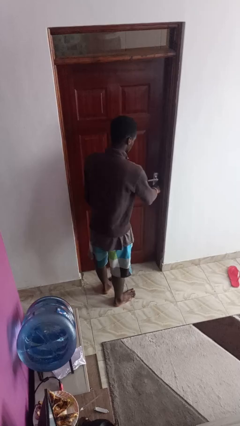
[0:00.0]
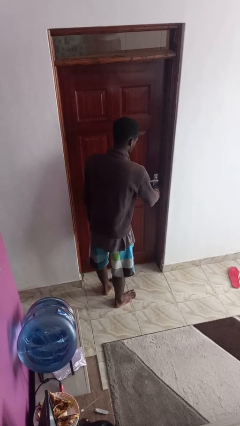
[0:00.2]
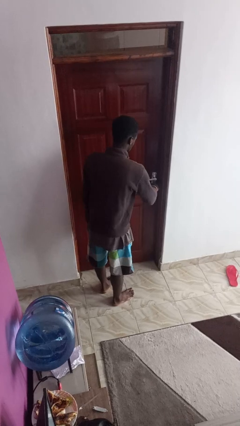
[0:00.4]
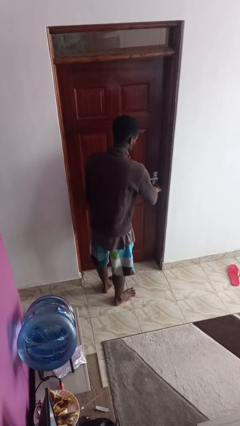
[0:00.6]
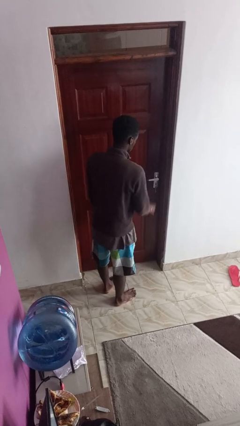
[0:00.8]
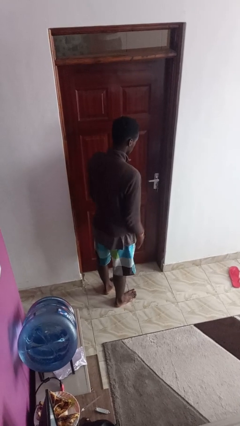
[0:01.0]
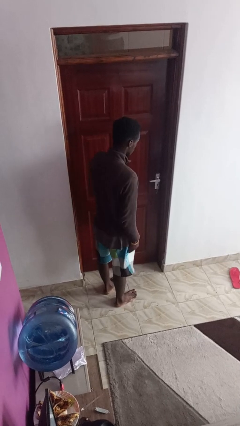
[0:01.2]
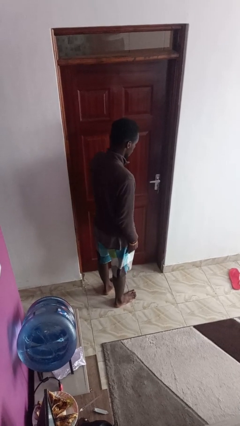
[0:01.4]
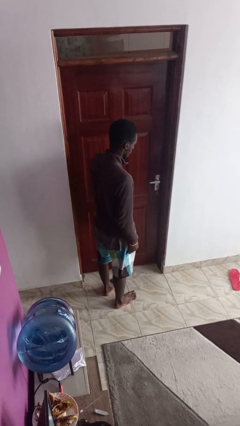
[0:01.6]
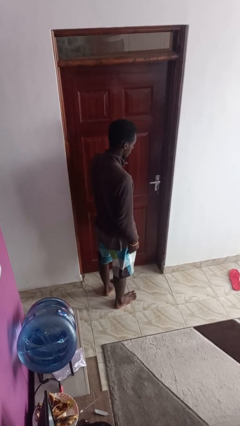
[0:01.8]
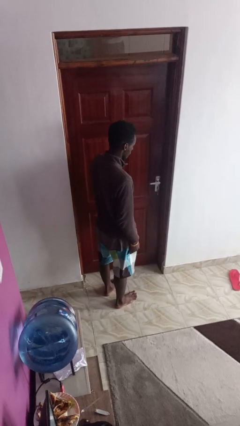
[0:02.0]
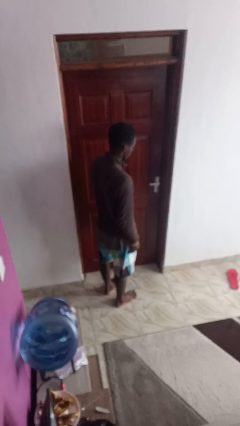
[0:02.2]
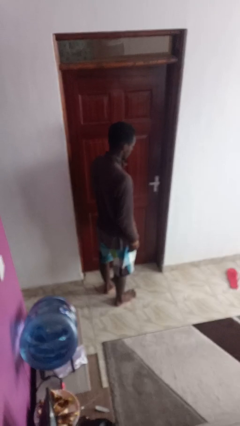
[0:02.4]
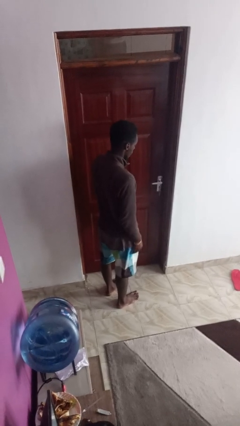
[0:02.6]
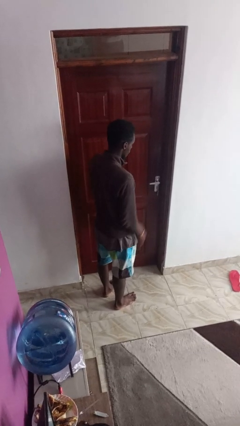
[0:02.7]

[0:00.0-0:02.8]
person unlocks door with keys

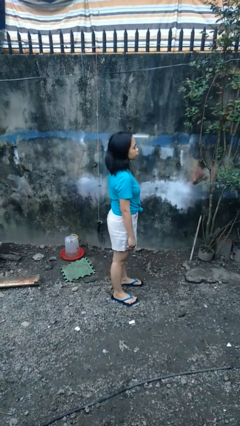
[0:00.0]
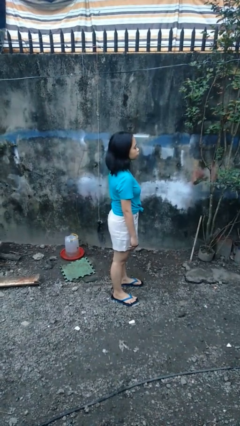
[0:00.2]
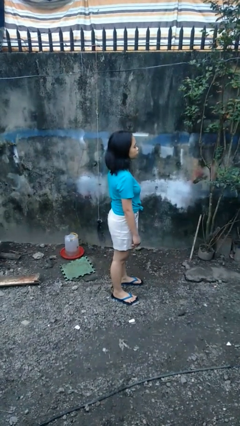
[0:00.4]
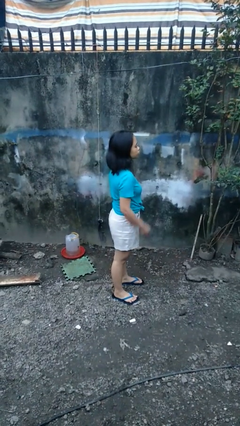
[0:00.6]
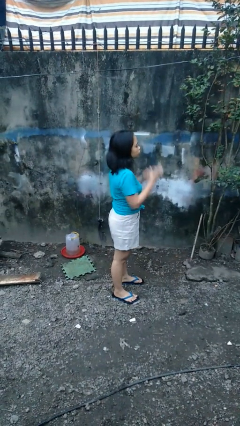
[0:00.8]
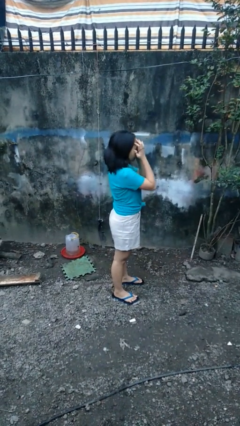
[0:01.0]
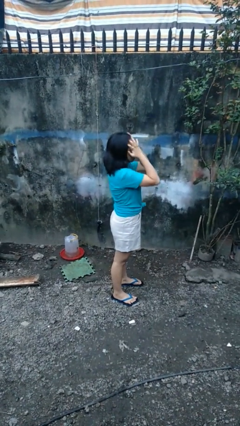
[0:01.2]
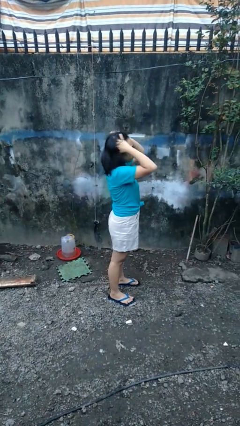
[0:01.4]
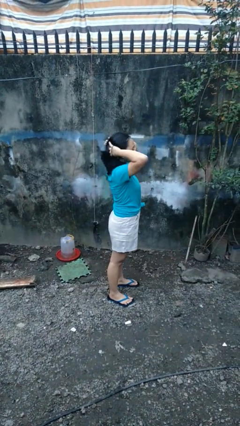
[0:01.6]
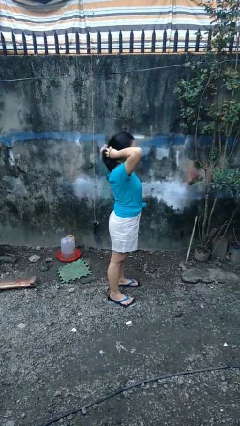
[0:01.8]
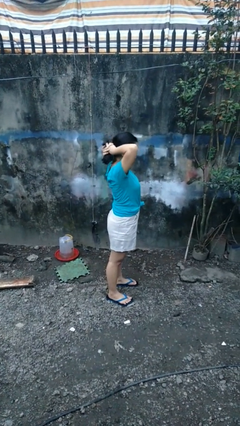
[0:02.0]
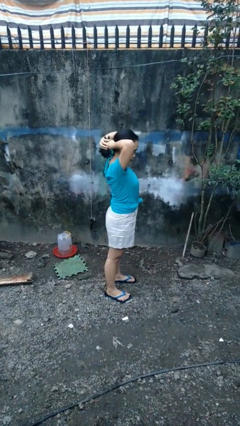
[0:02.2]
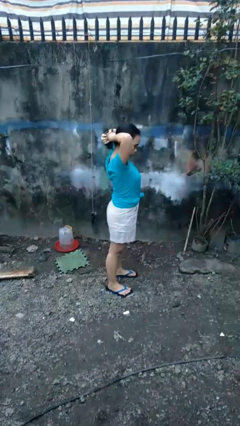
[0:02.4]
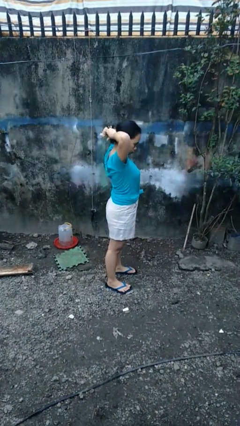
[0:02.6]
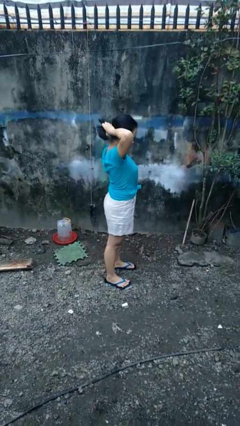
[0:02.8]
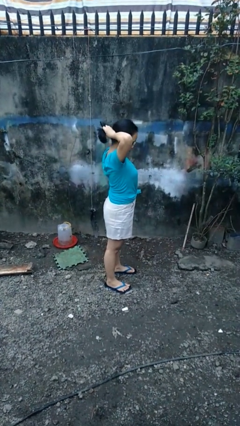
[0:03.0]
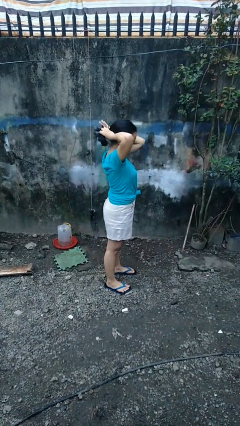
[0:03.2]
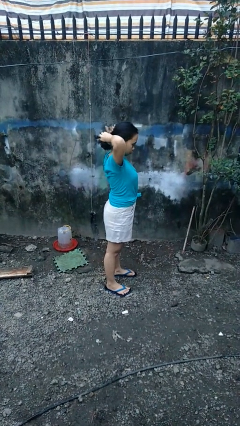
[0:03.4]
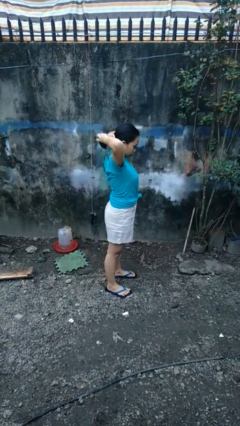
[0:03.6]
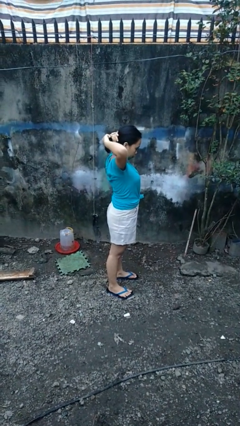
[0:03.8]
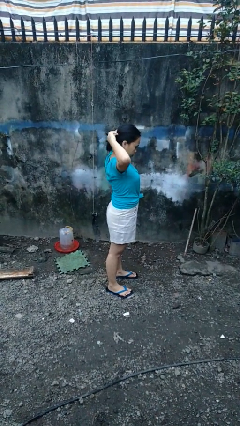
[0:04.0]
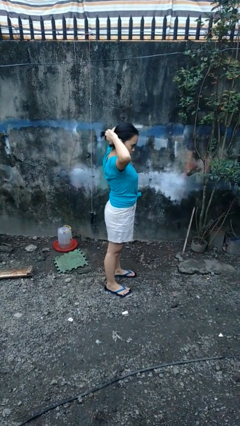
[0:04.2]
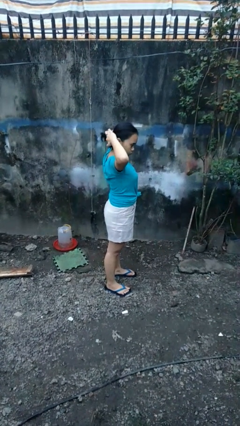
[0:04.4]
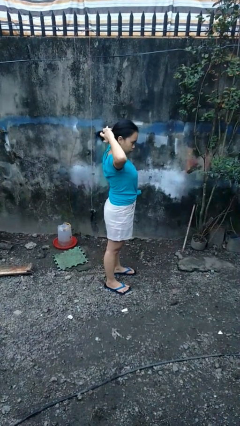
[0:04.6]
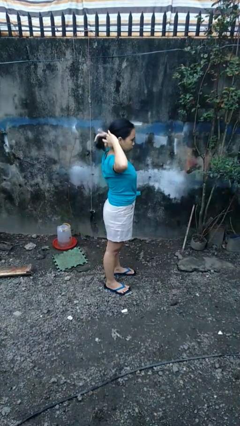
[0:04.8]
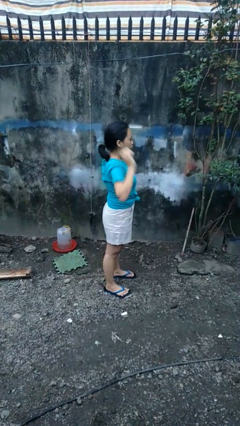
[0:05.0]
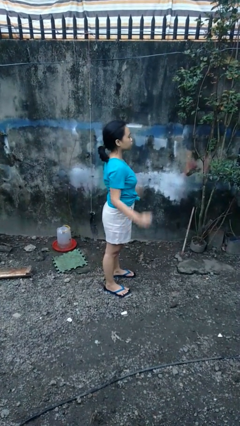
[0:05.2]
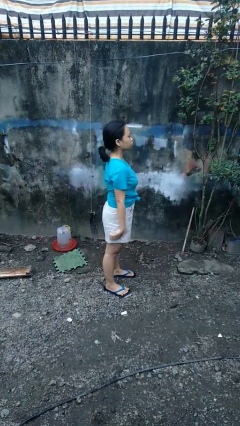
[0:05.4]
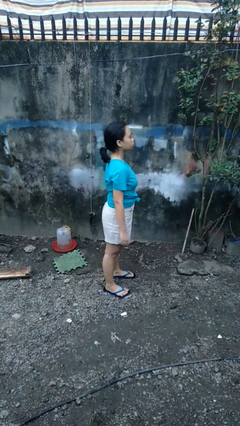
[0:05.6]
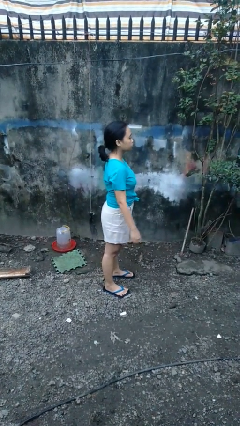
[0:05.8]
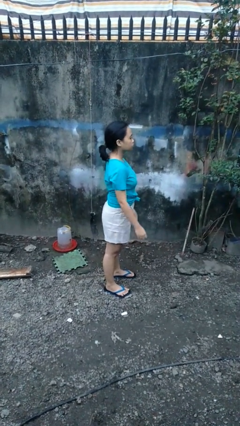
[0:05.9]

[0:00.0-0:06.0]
person puts hair in ponytail

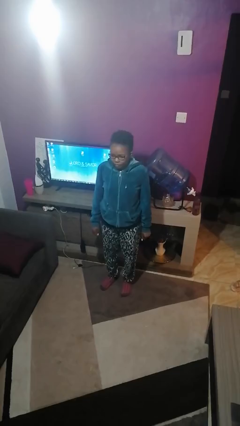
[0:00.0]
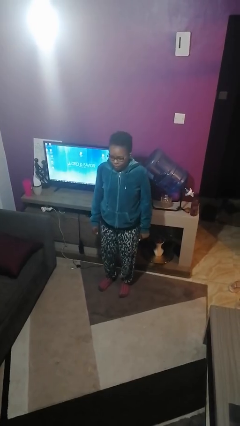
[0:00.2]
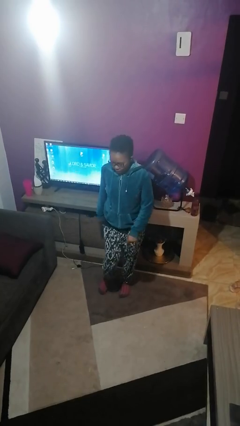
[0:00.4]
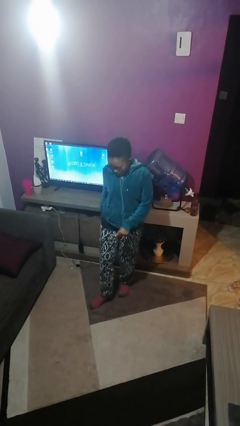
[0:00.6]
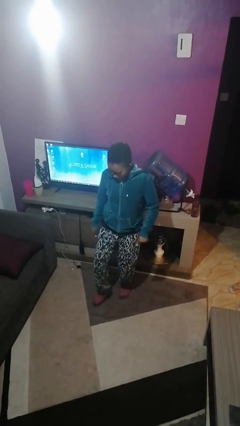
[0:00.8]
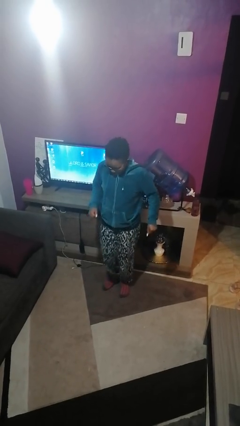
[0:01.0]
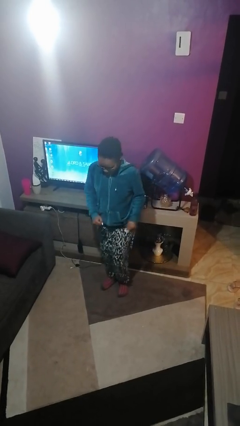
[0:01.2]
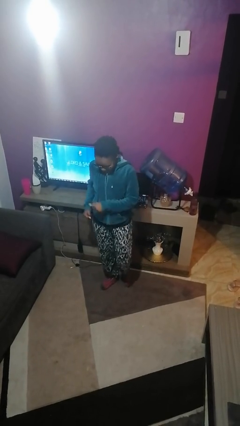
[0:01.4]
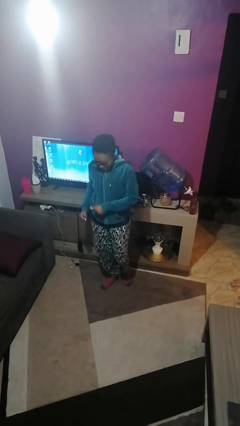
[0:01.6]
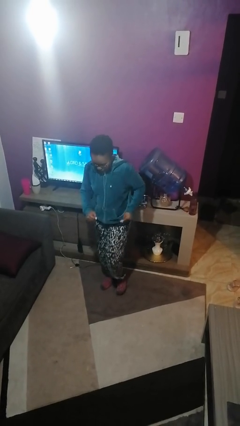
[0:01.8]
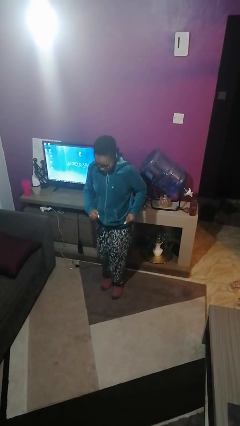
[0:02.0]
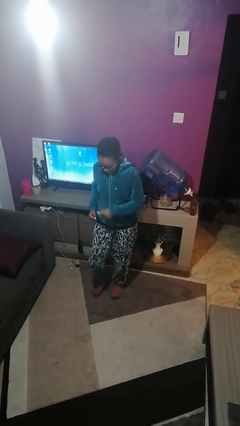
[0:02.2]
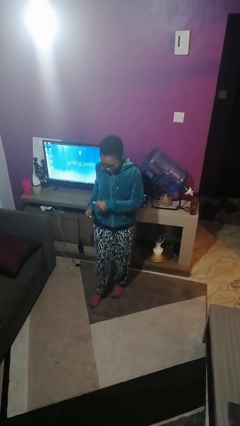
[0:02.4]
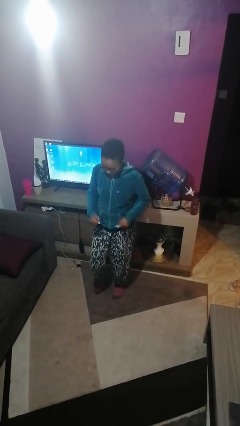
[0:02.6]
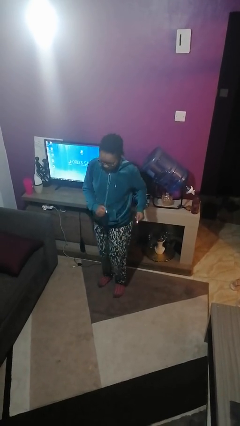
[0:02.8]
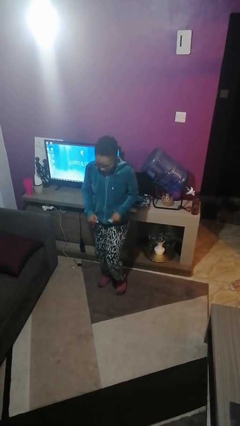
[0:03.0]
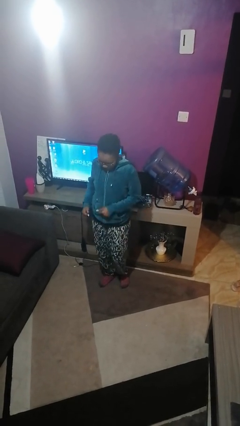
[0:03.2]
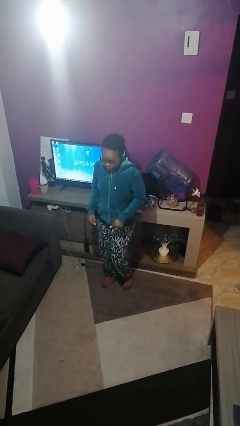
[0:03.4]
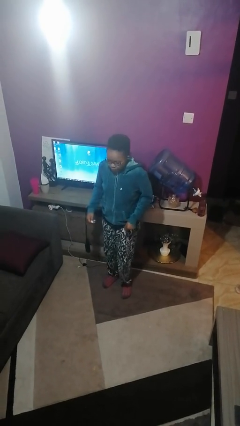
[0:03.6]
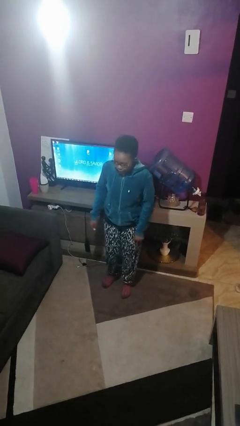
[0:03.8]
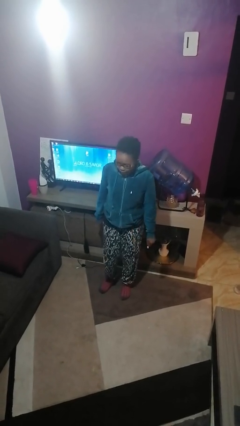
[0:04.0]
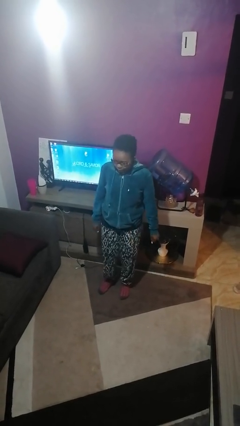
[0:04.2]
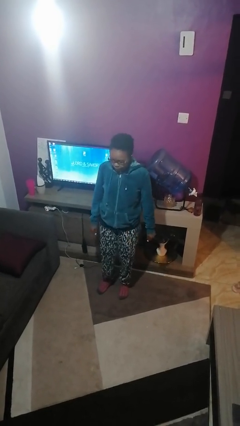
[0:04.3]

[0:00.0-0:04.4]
person dances in place

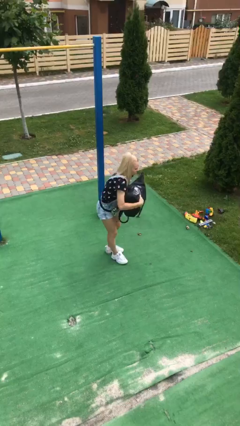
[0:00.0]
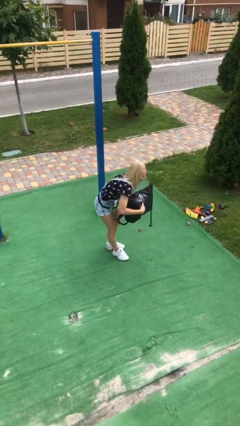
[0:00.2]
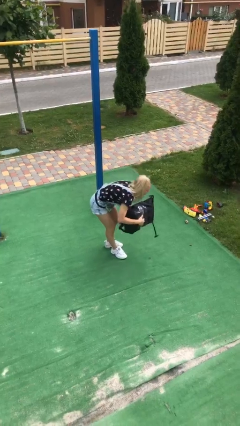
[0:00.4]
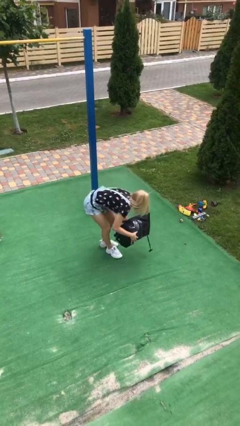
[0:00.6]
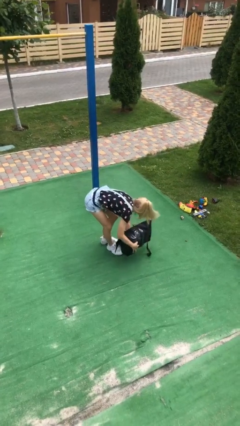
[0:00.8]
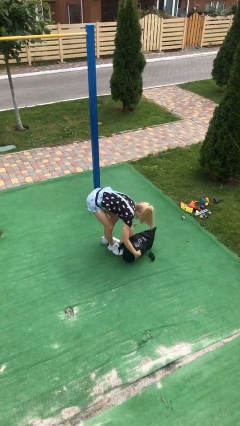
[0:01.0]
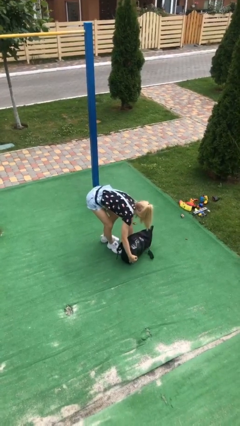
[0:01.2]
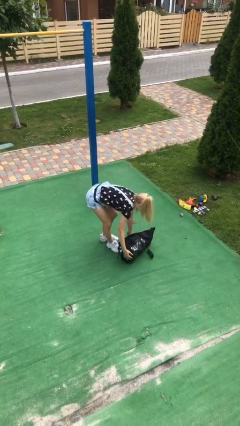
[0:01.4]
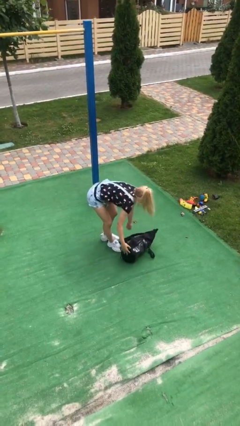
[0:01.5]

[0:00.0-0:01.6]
person puts down object on floor

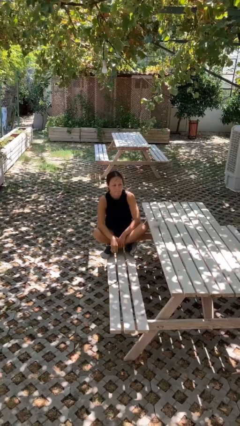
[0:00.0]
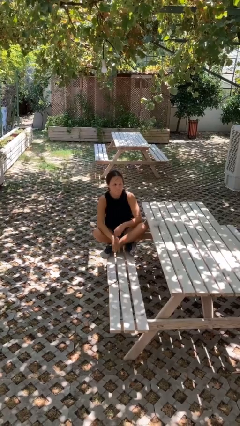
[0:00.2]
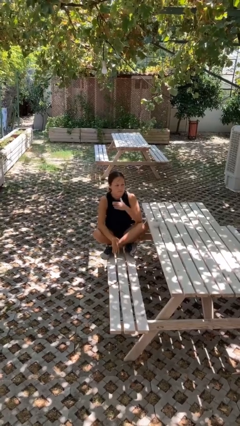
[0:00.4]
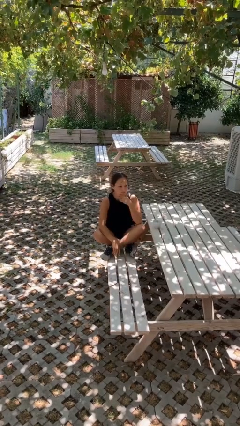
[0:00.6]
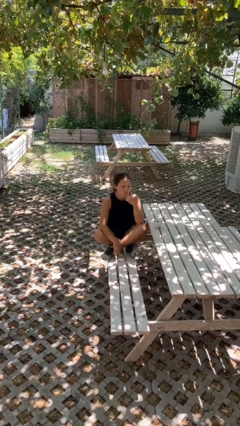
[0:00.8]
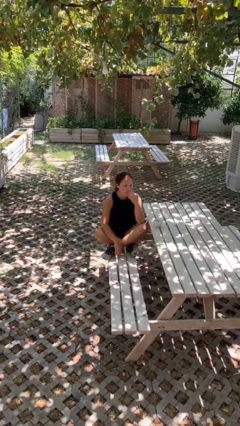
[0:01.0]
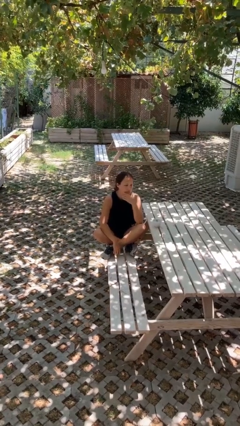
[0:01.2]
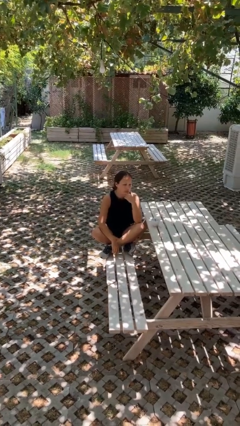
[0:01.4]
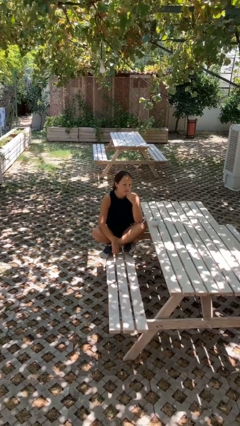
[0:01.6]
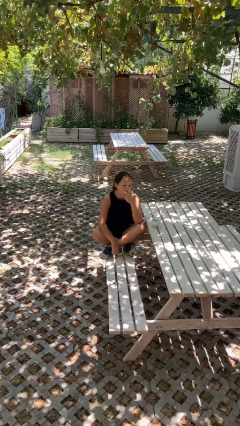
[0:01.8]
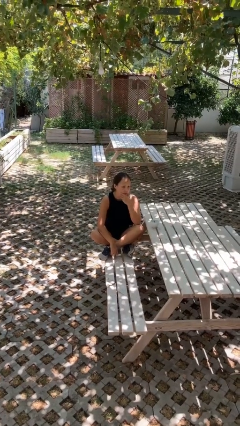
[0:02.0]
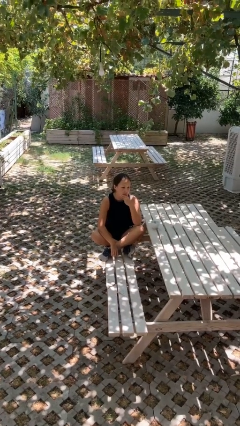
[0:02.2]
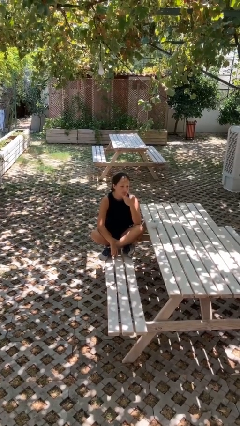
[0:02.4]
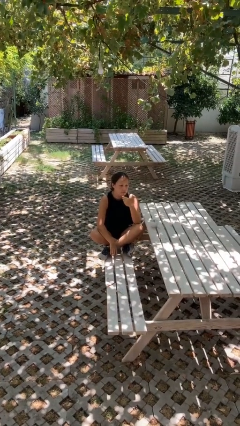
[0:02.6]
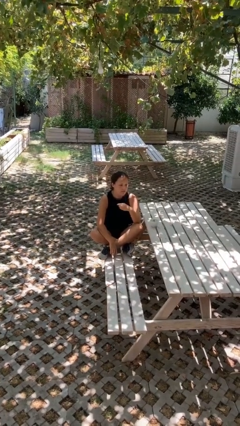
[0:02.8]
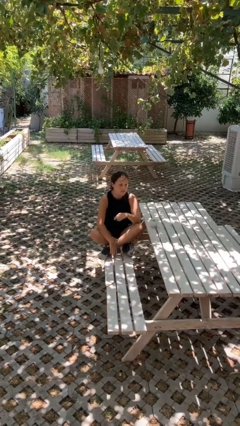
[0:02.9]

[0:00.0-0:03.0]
person strokes chin
